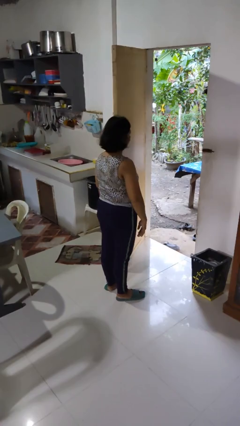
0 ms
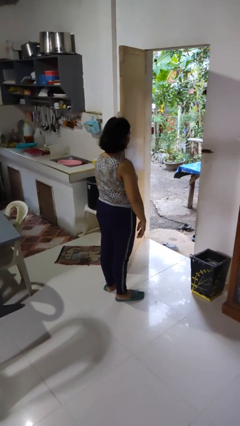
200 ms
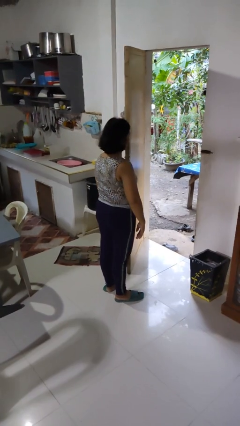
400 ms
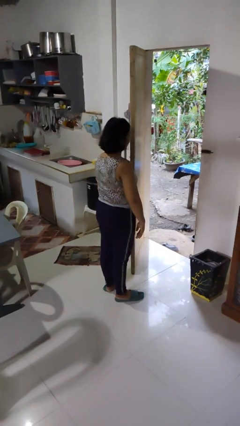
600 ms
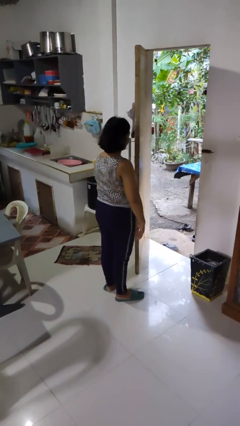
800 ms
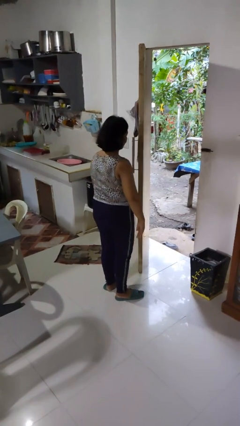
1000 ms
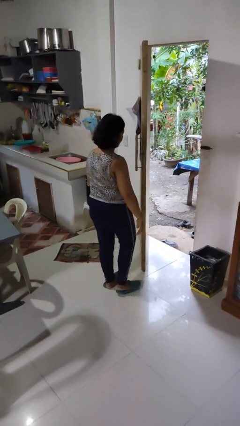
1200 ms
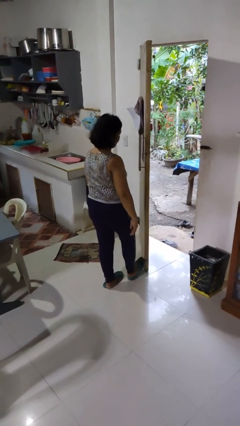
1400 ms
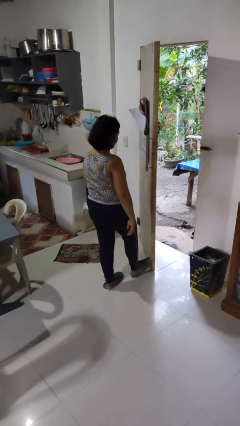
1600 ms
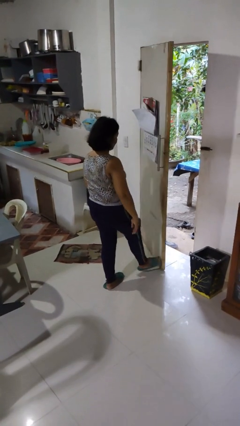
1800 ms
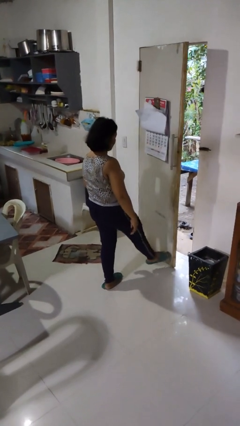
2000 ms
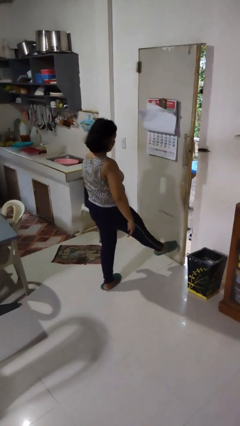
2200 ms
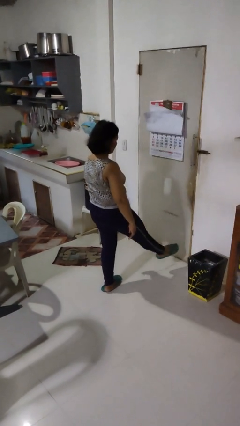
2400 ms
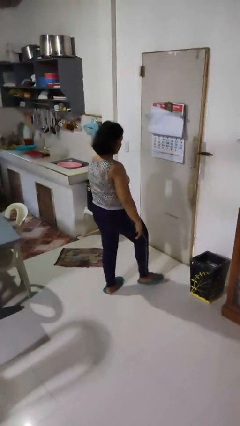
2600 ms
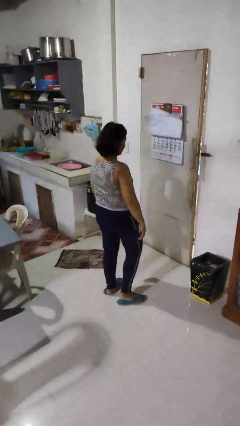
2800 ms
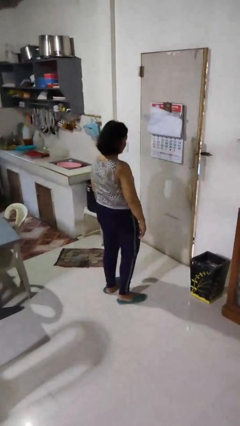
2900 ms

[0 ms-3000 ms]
person closes door with foot

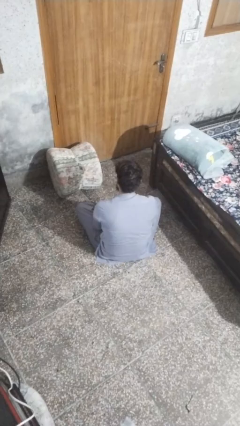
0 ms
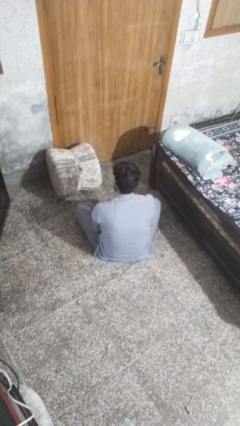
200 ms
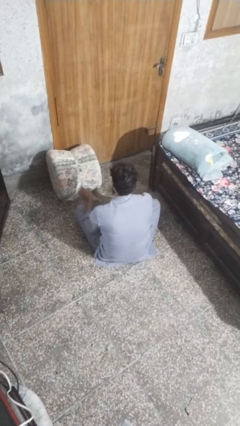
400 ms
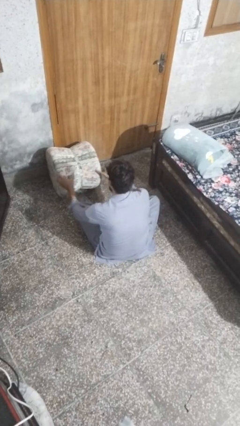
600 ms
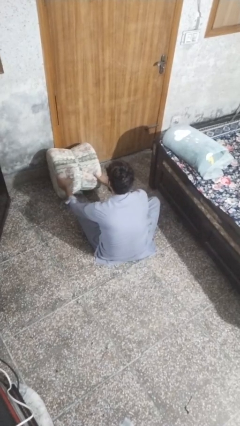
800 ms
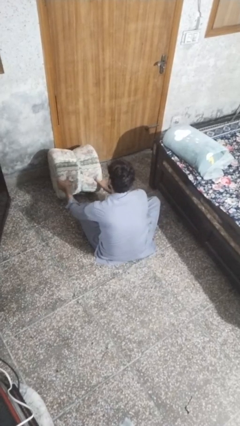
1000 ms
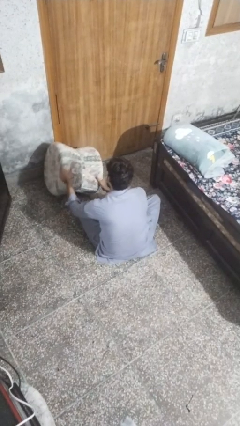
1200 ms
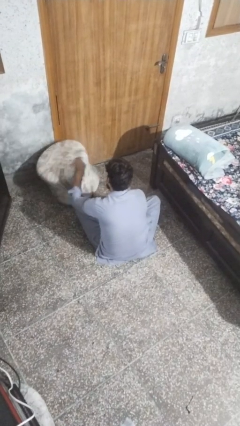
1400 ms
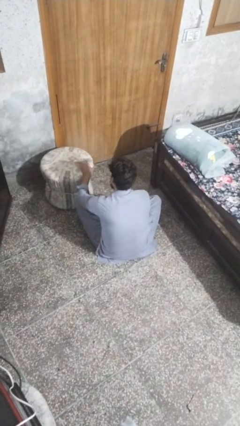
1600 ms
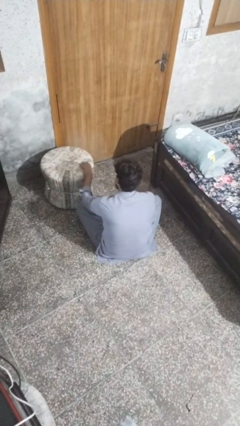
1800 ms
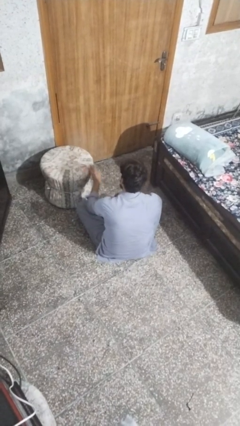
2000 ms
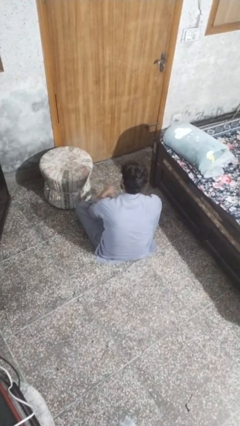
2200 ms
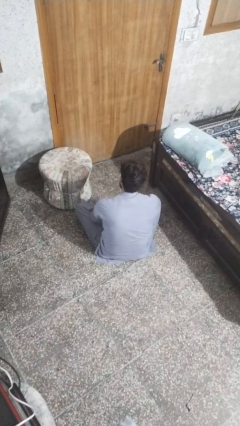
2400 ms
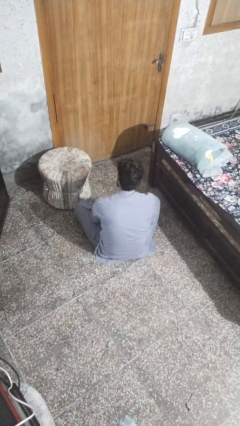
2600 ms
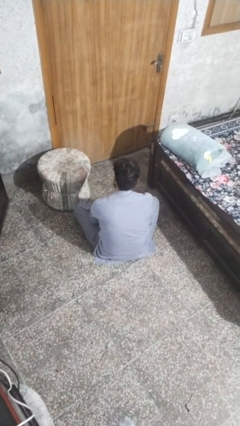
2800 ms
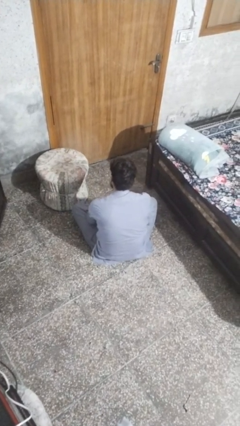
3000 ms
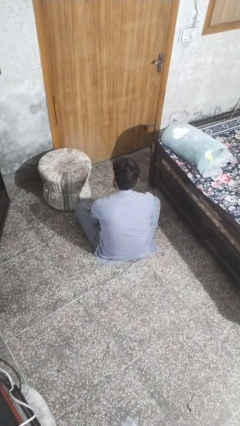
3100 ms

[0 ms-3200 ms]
person sets upright furniture

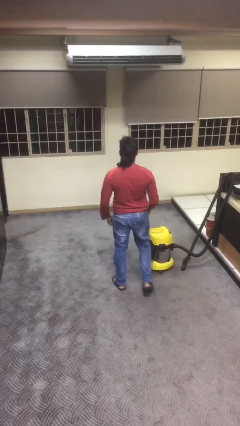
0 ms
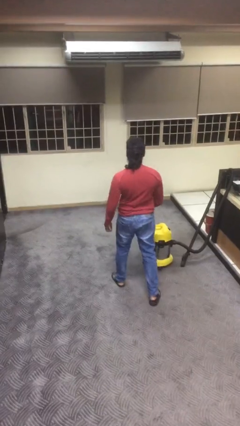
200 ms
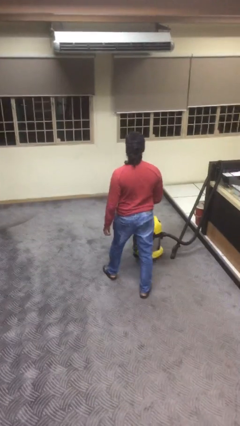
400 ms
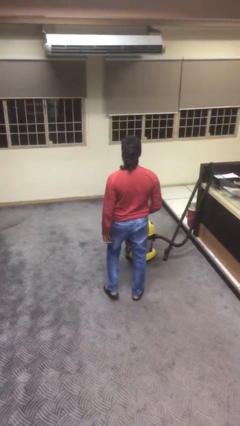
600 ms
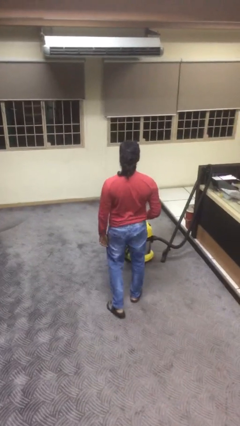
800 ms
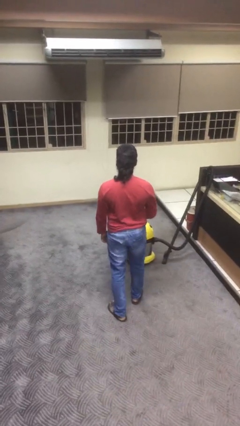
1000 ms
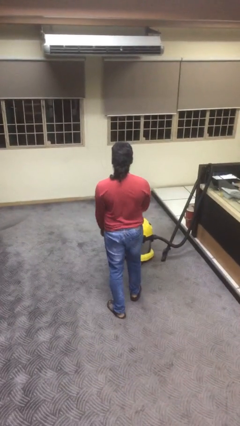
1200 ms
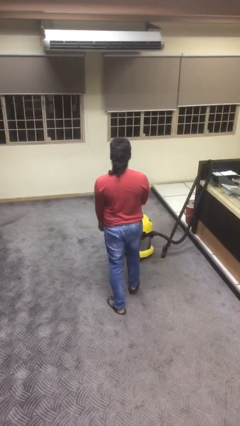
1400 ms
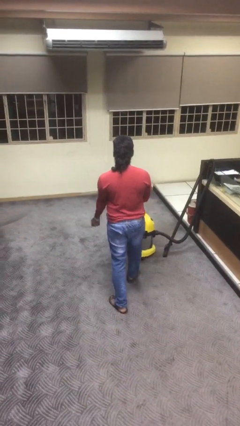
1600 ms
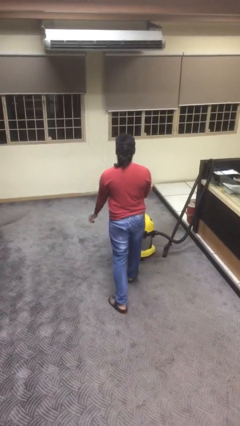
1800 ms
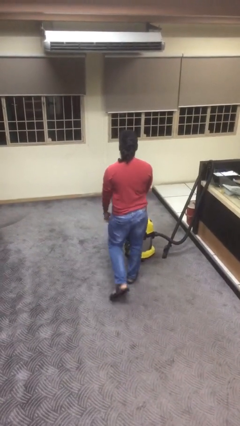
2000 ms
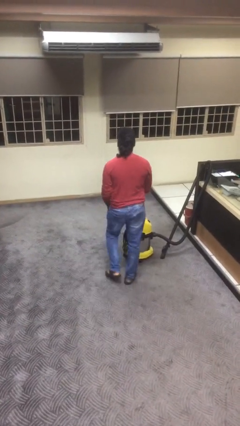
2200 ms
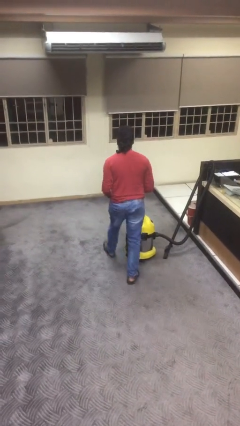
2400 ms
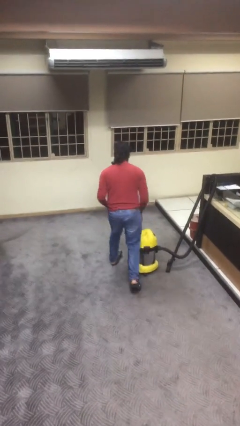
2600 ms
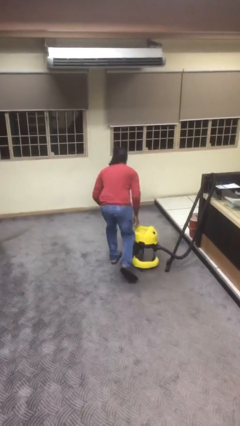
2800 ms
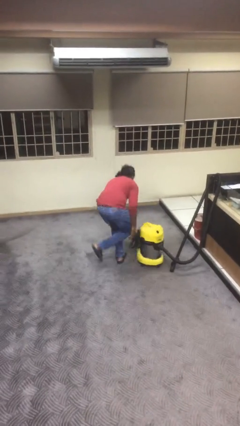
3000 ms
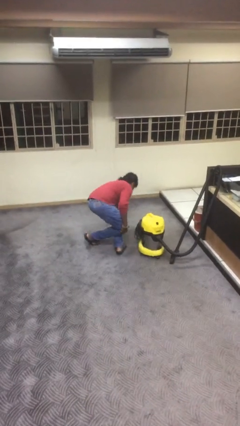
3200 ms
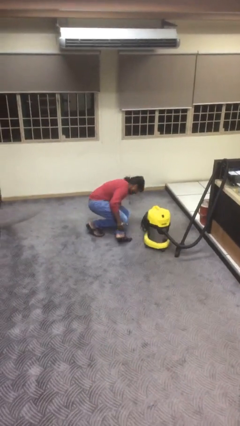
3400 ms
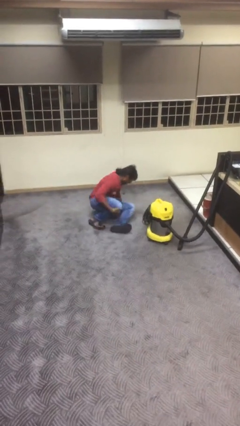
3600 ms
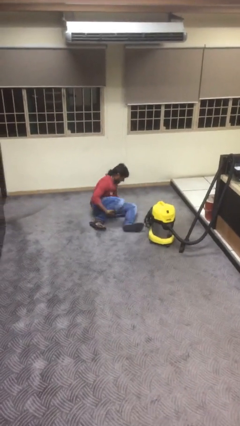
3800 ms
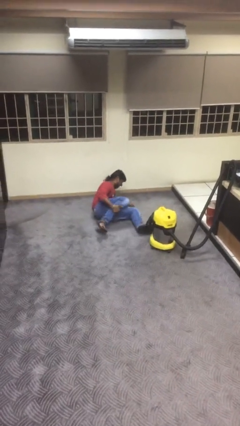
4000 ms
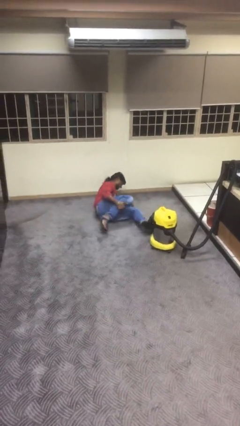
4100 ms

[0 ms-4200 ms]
person trips on object on floor

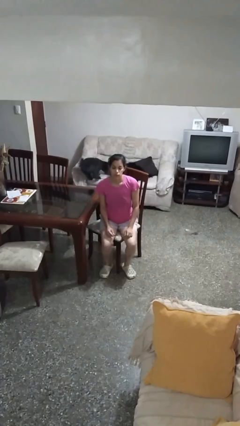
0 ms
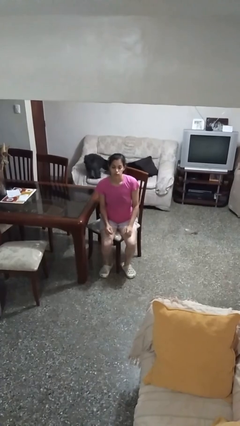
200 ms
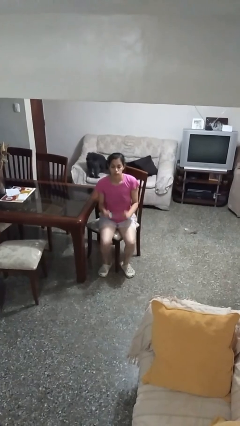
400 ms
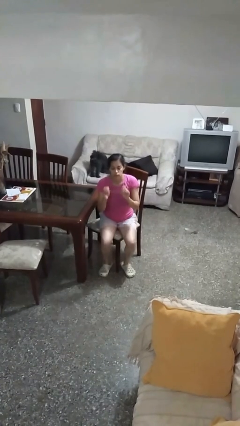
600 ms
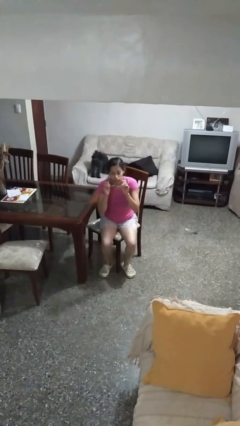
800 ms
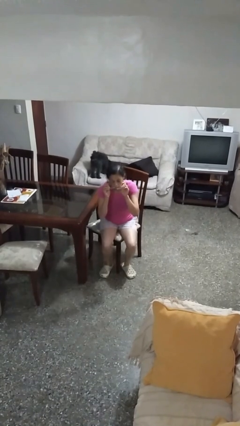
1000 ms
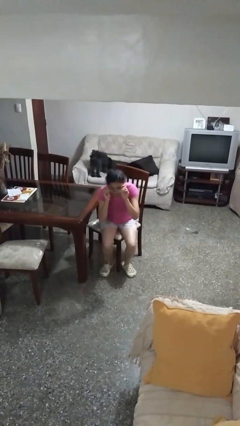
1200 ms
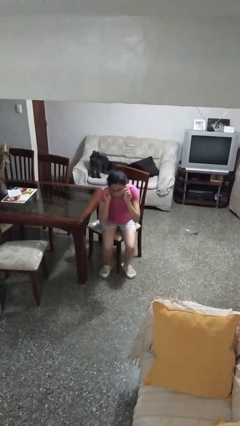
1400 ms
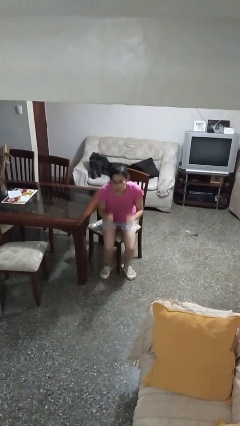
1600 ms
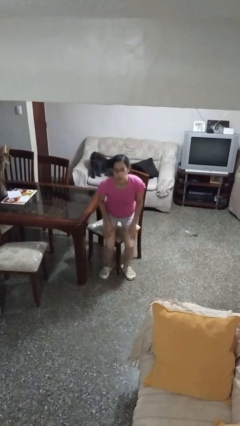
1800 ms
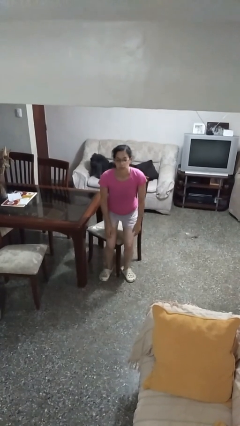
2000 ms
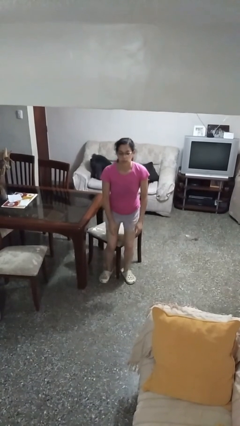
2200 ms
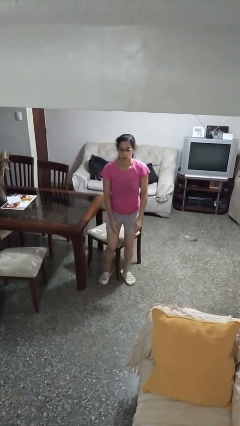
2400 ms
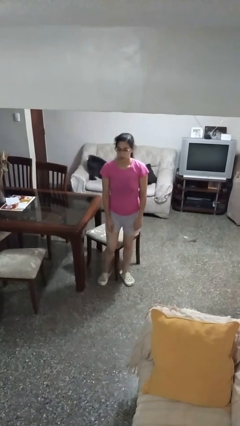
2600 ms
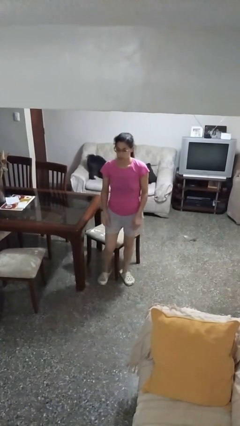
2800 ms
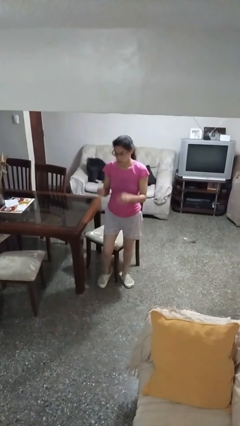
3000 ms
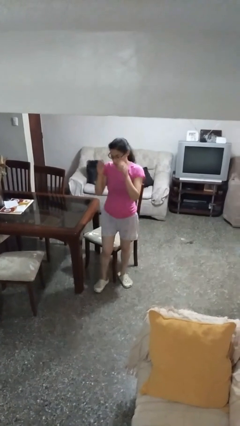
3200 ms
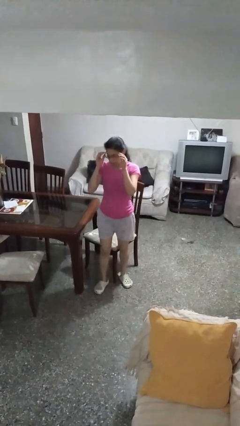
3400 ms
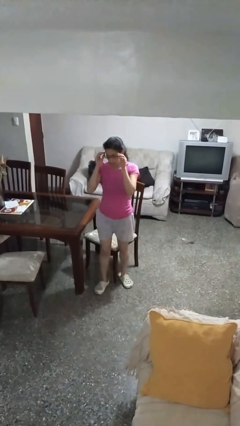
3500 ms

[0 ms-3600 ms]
person puts on glasses

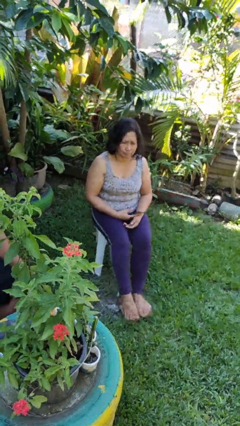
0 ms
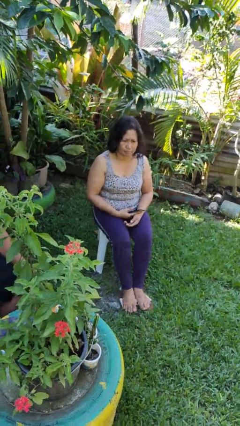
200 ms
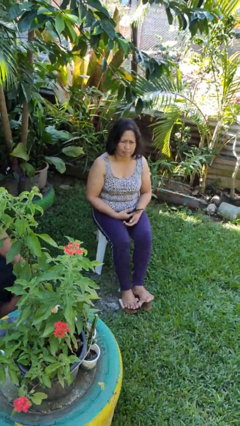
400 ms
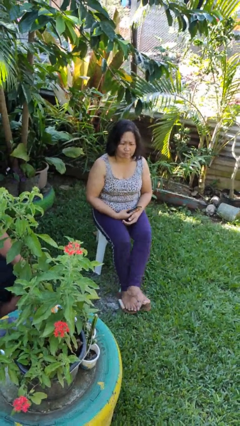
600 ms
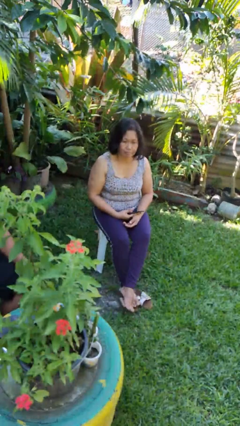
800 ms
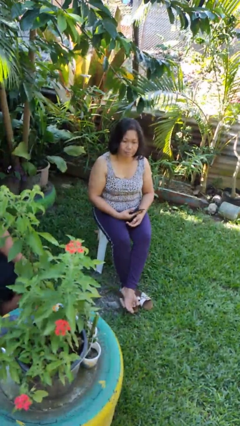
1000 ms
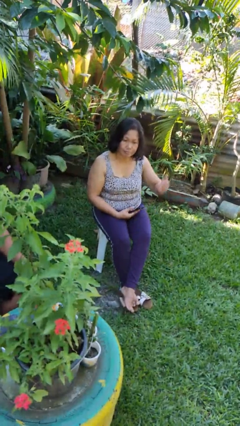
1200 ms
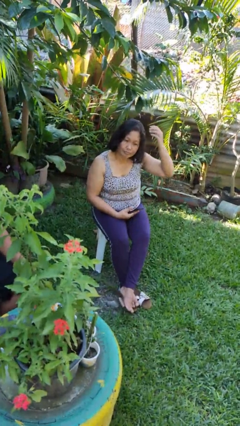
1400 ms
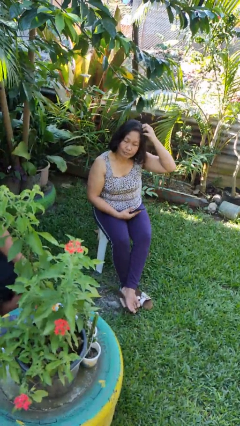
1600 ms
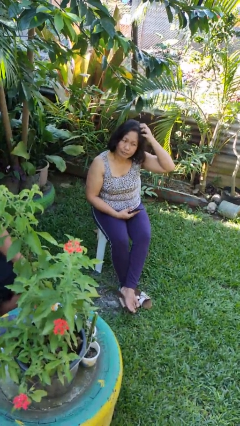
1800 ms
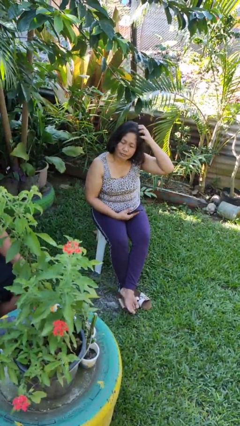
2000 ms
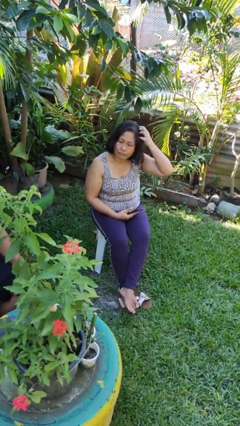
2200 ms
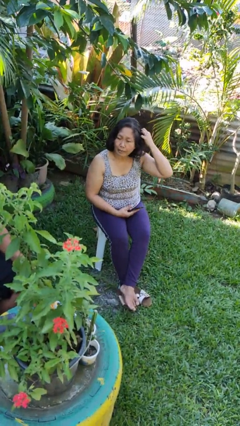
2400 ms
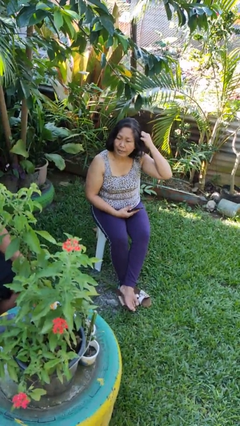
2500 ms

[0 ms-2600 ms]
person scratches face

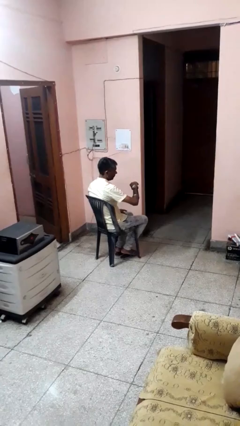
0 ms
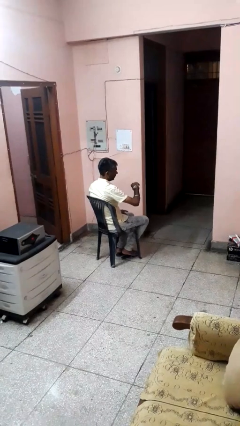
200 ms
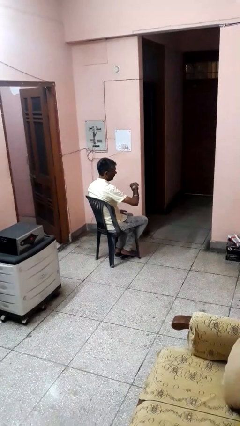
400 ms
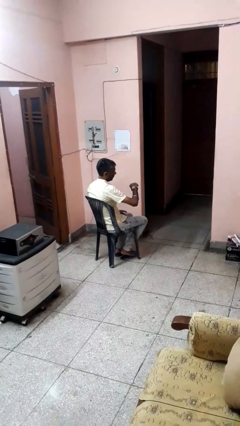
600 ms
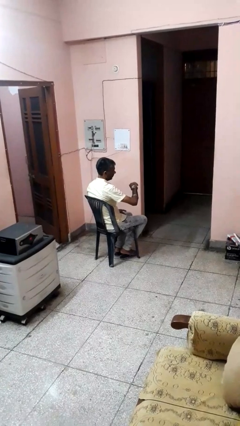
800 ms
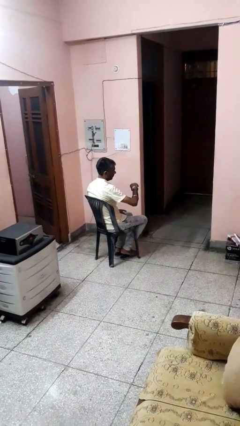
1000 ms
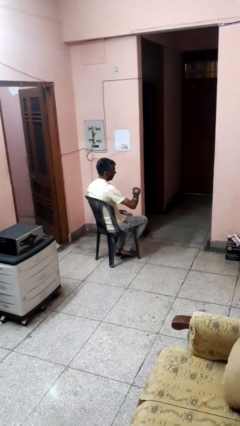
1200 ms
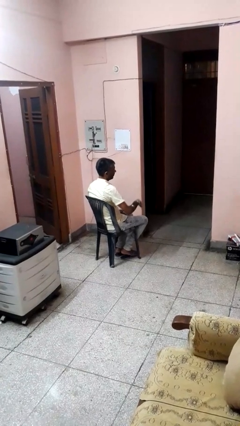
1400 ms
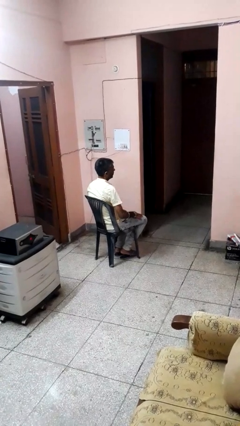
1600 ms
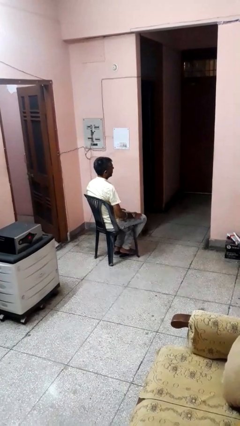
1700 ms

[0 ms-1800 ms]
person looks at wristwatch
